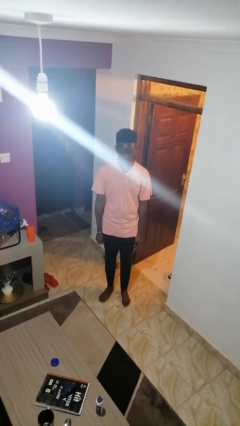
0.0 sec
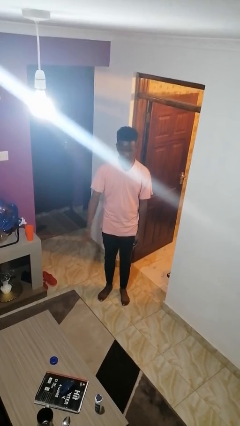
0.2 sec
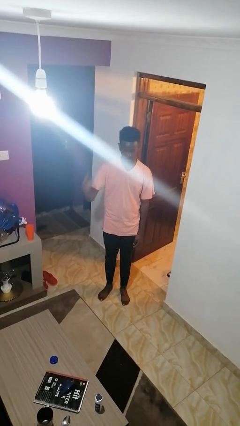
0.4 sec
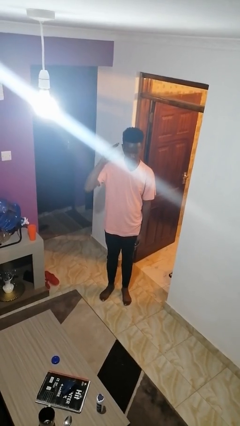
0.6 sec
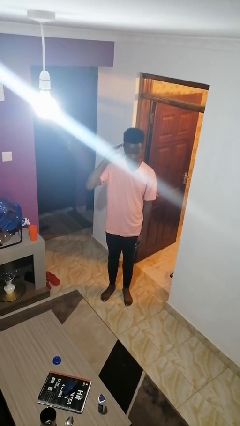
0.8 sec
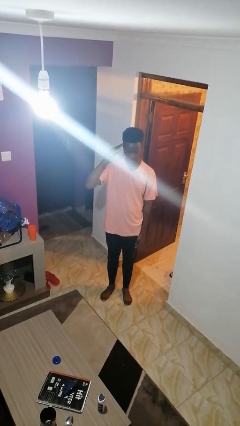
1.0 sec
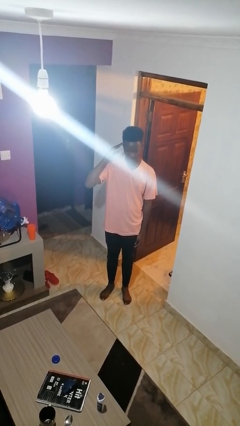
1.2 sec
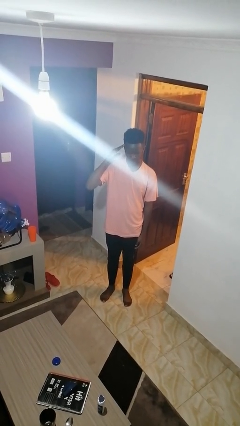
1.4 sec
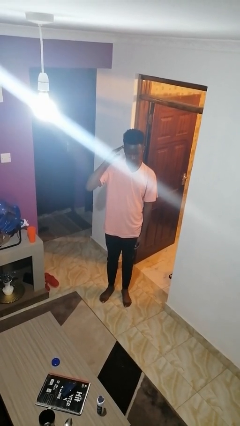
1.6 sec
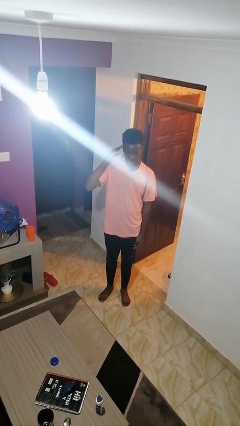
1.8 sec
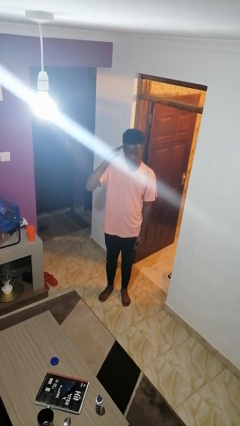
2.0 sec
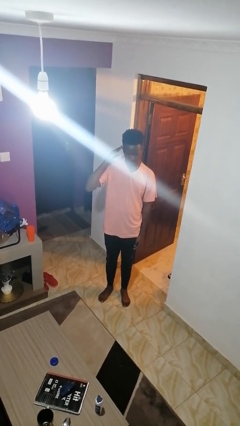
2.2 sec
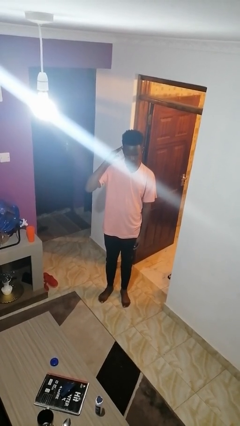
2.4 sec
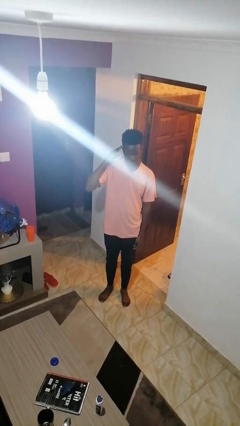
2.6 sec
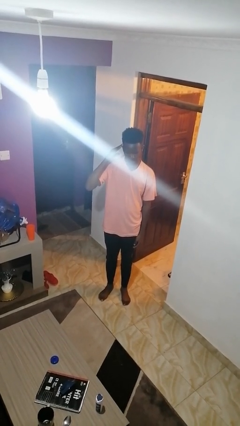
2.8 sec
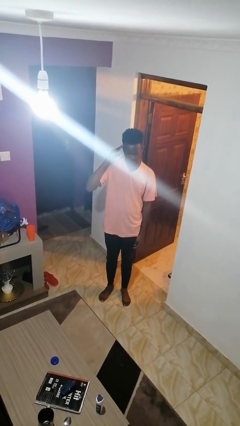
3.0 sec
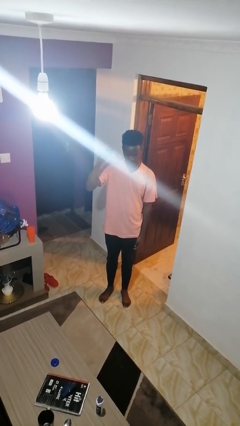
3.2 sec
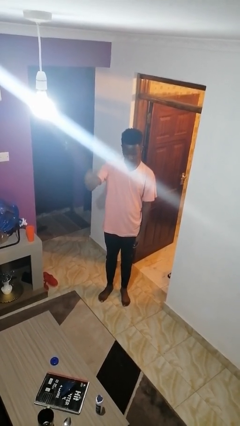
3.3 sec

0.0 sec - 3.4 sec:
person salutes

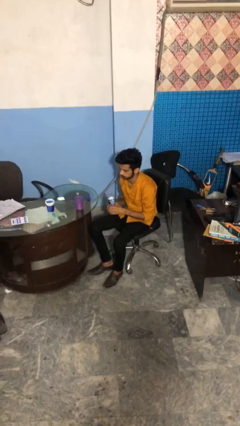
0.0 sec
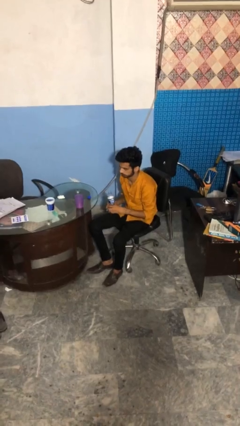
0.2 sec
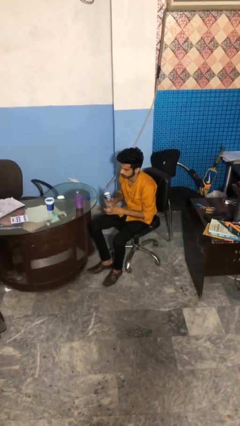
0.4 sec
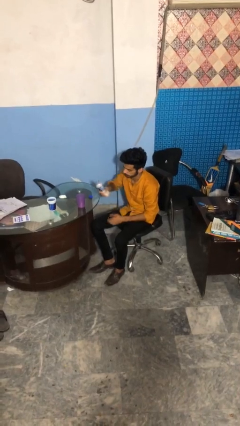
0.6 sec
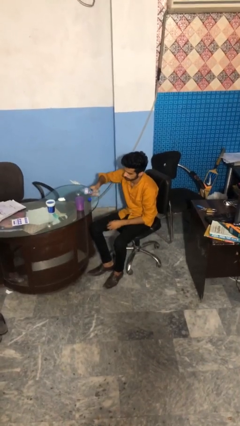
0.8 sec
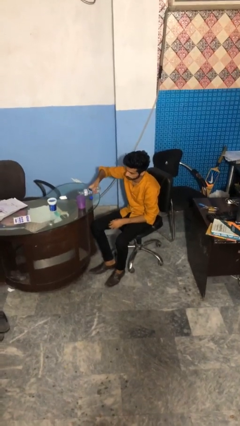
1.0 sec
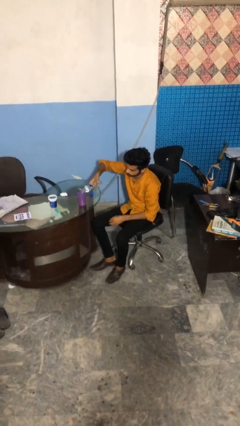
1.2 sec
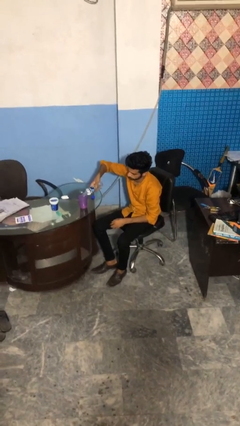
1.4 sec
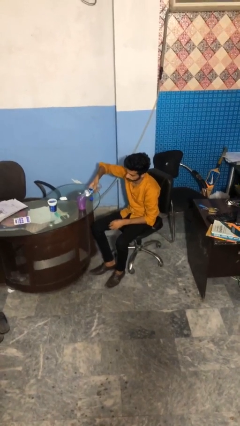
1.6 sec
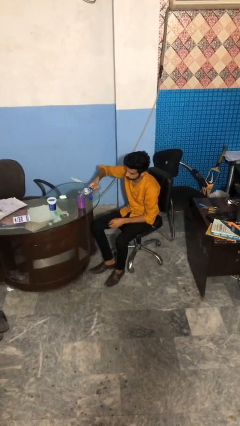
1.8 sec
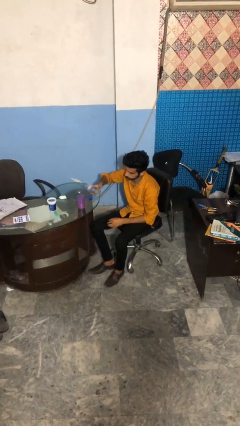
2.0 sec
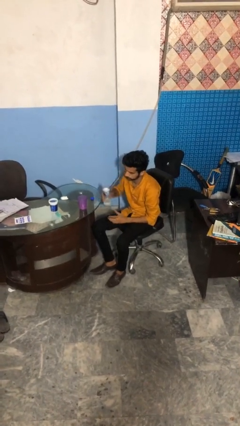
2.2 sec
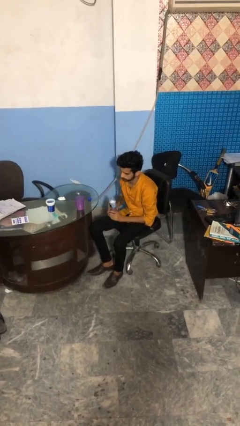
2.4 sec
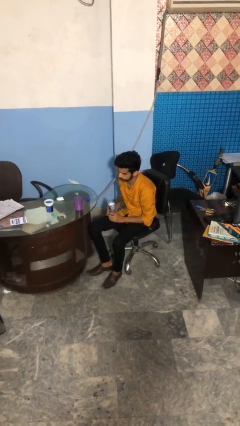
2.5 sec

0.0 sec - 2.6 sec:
person pours liquid into cup

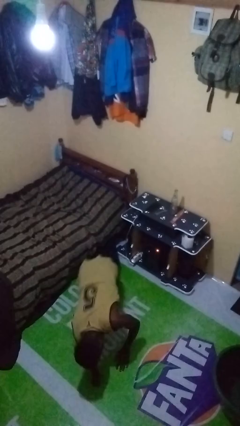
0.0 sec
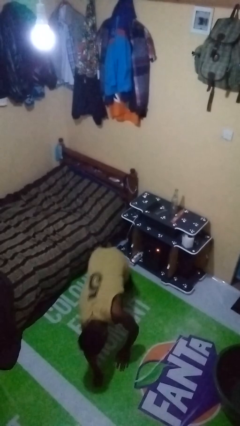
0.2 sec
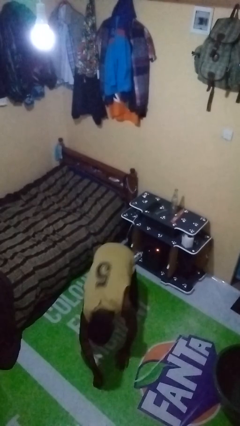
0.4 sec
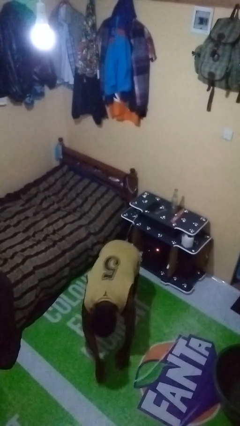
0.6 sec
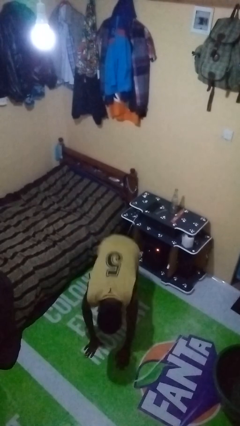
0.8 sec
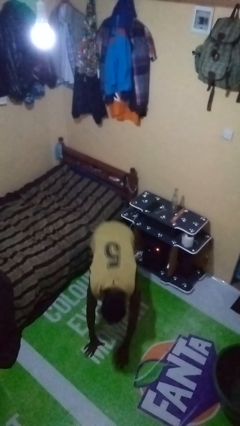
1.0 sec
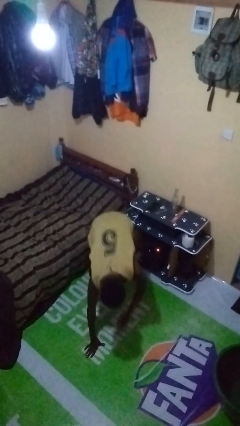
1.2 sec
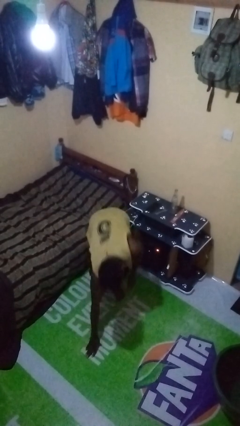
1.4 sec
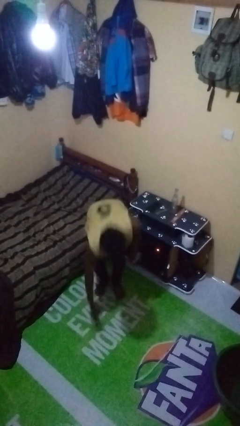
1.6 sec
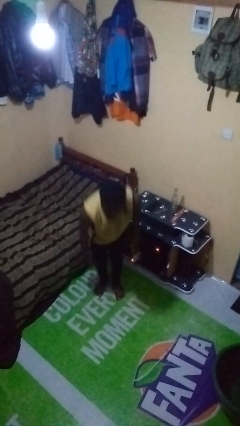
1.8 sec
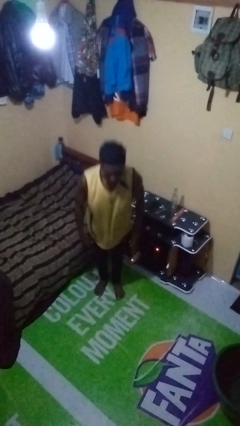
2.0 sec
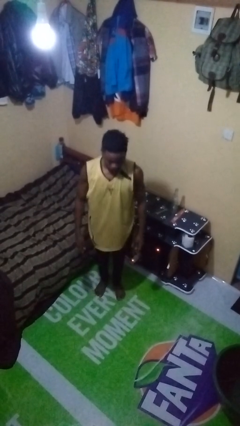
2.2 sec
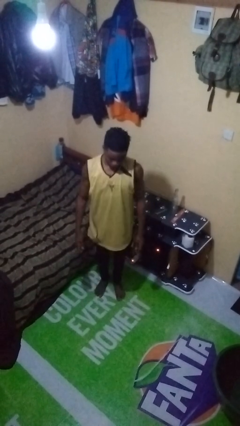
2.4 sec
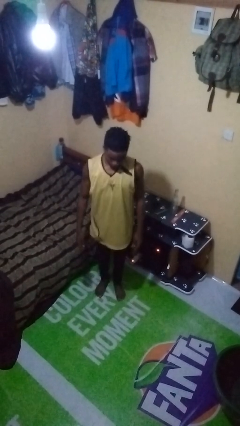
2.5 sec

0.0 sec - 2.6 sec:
person stands up from floor

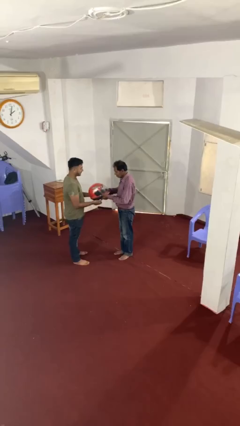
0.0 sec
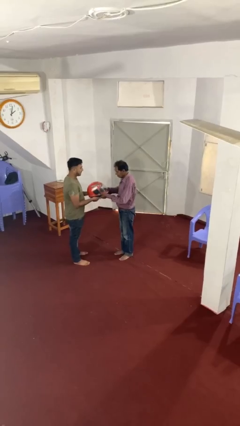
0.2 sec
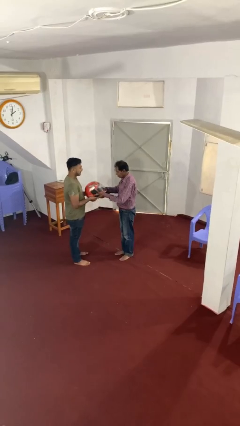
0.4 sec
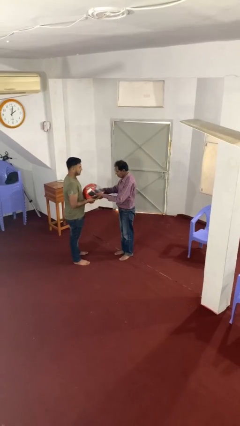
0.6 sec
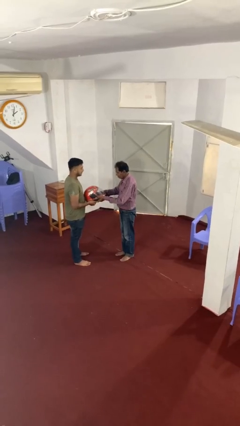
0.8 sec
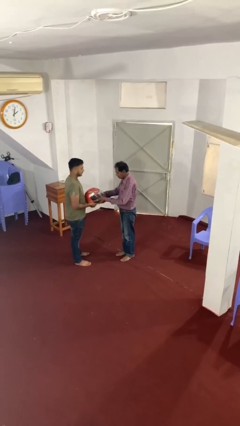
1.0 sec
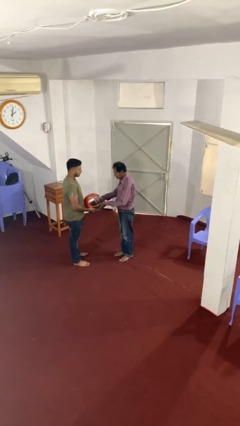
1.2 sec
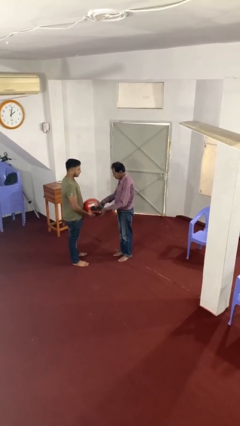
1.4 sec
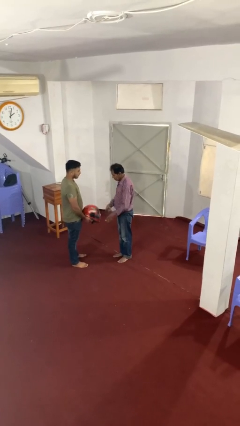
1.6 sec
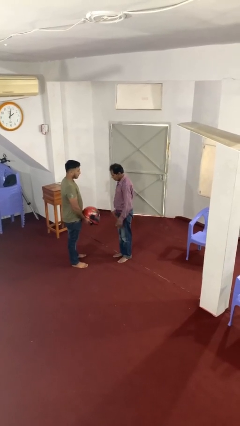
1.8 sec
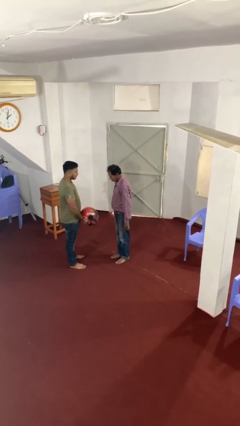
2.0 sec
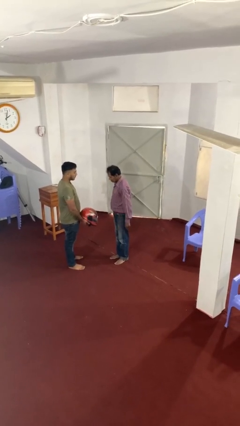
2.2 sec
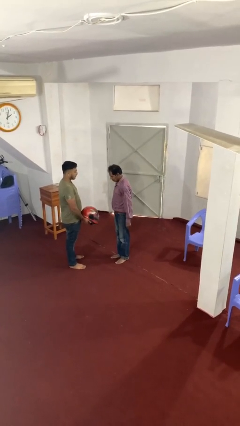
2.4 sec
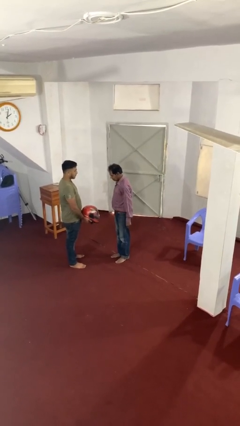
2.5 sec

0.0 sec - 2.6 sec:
person transfers object to person

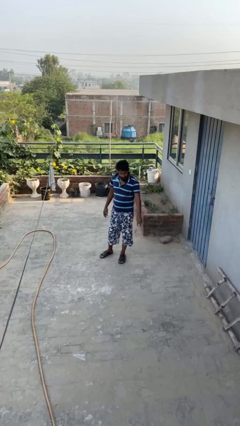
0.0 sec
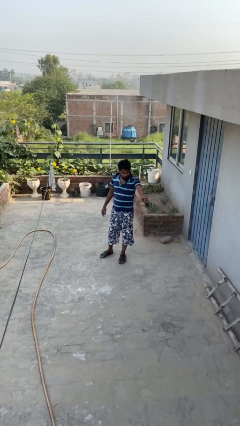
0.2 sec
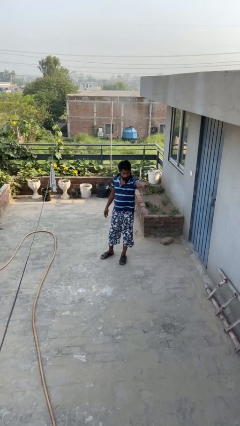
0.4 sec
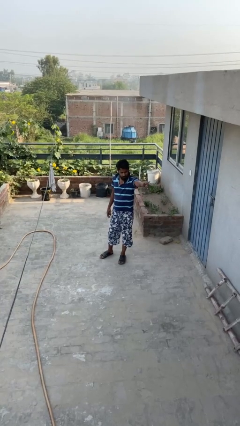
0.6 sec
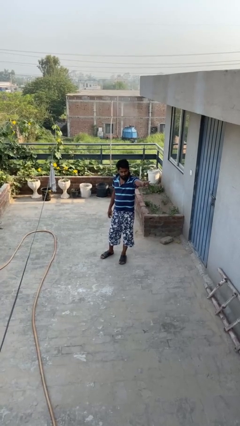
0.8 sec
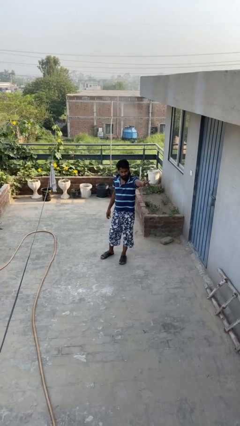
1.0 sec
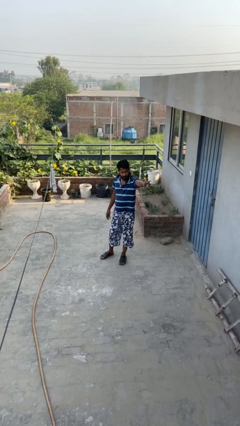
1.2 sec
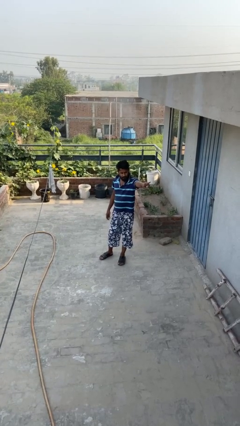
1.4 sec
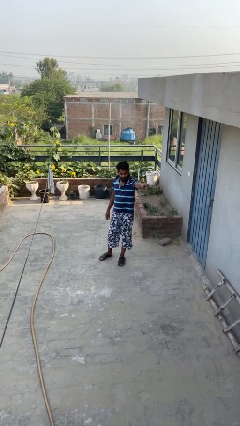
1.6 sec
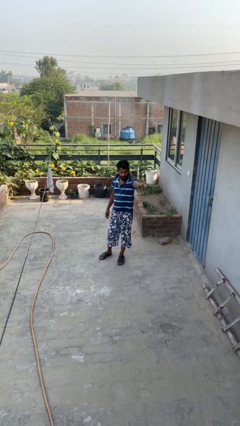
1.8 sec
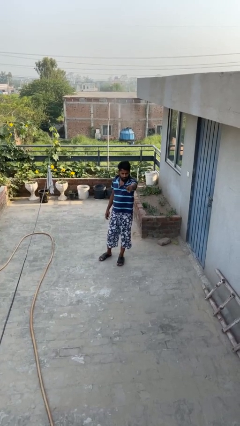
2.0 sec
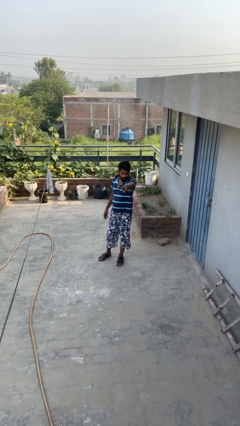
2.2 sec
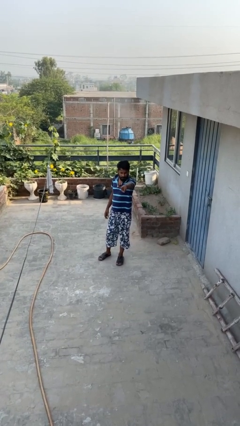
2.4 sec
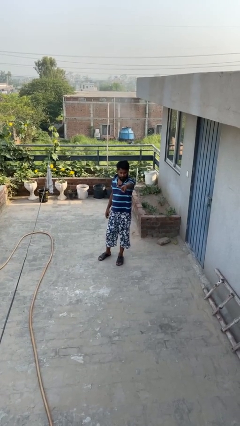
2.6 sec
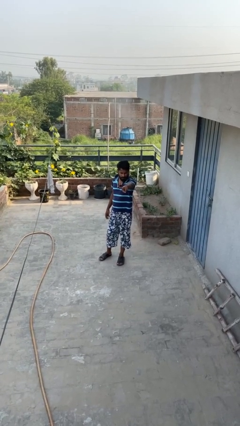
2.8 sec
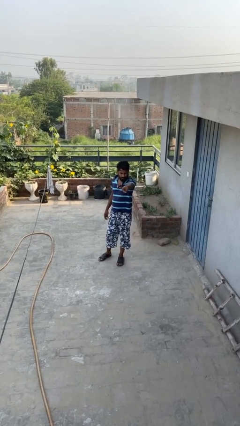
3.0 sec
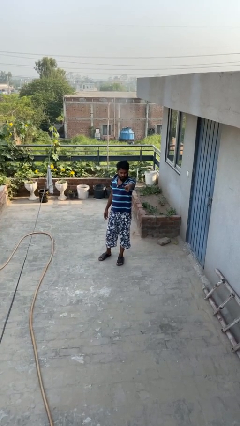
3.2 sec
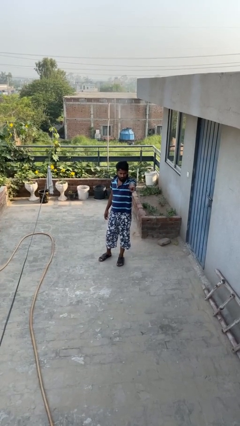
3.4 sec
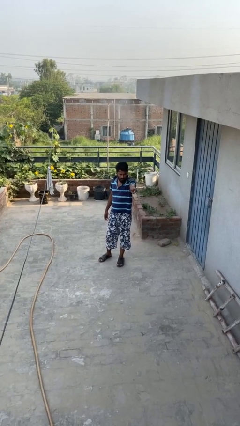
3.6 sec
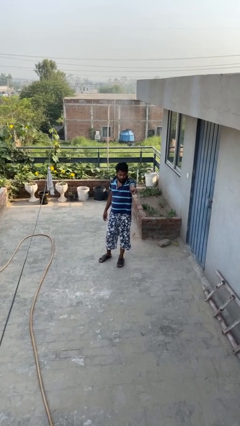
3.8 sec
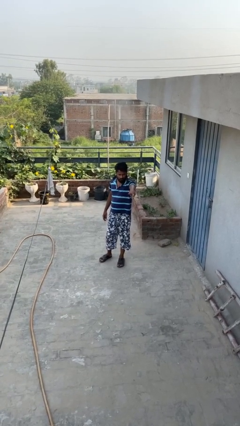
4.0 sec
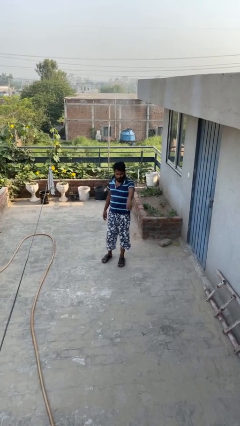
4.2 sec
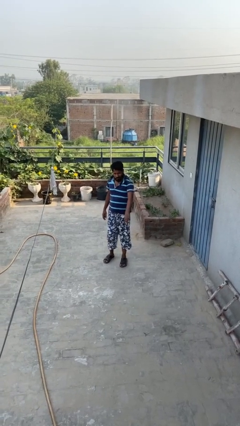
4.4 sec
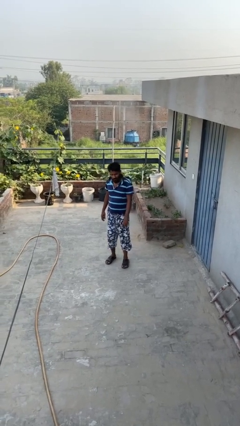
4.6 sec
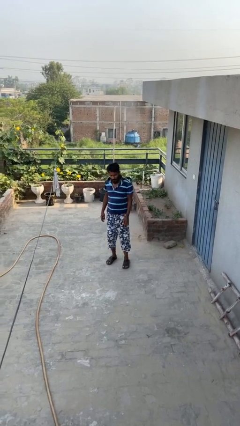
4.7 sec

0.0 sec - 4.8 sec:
person gestures peace

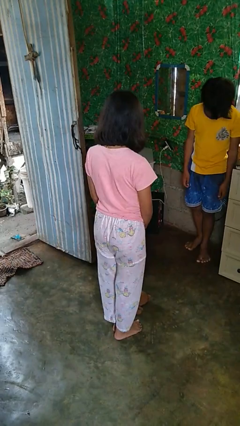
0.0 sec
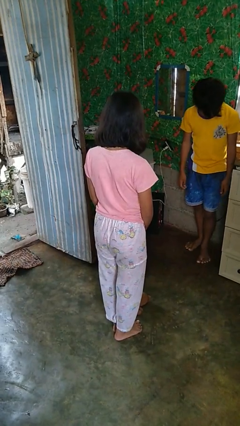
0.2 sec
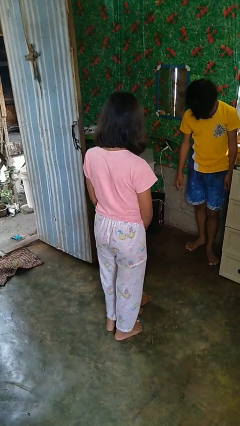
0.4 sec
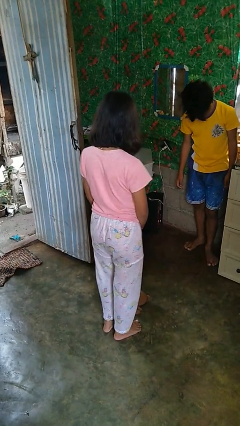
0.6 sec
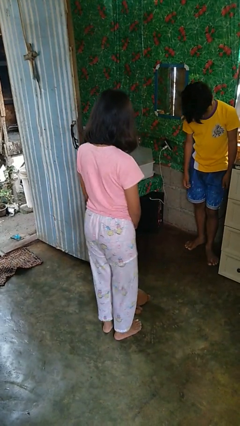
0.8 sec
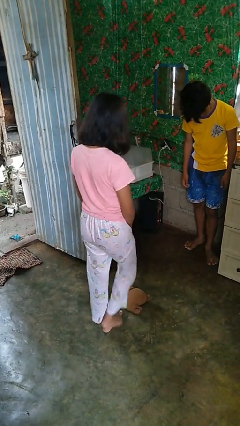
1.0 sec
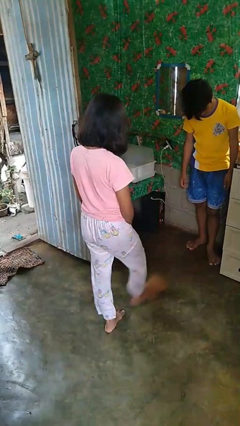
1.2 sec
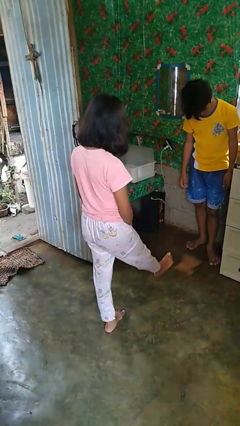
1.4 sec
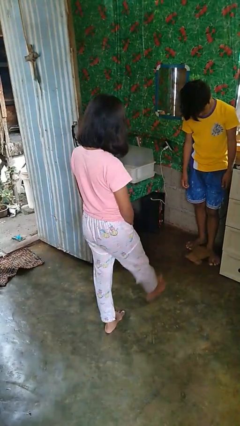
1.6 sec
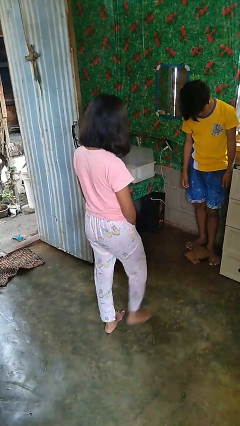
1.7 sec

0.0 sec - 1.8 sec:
person kicks object to person
